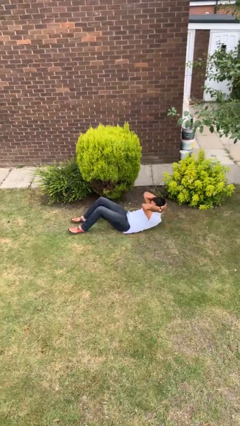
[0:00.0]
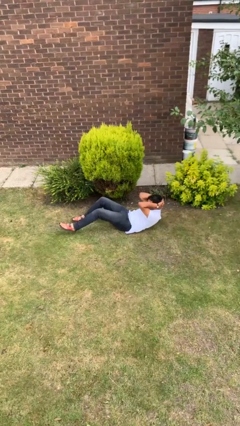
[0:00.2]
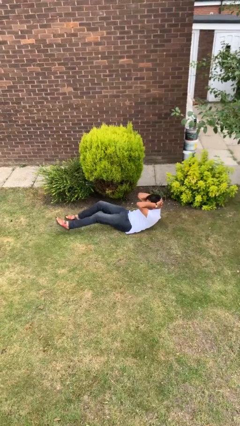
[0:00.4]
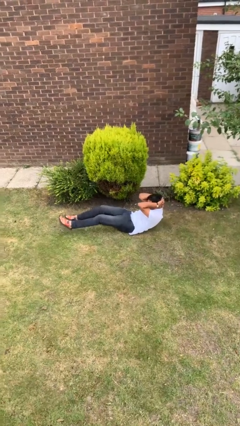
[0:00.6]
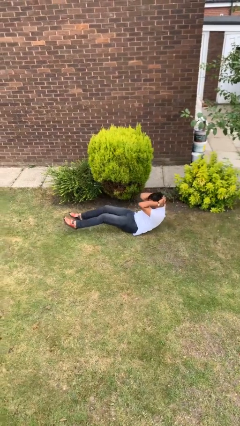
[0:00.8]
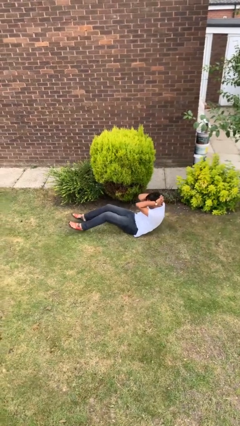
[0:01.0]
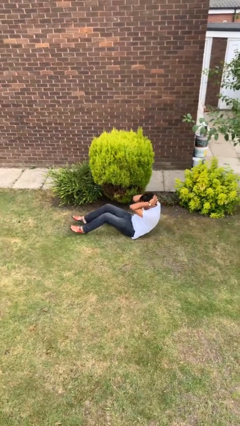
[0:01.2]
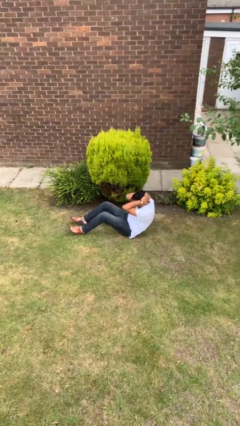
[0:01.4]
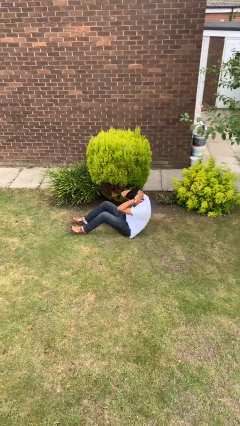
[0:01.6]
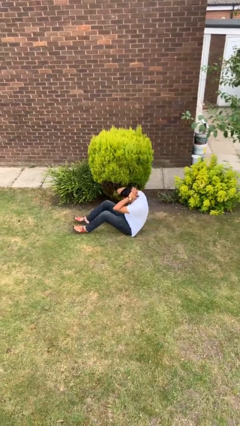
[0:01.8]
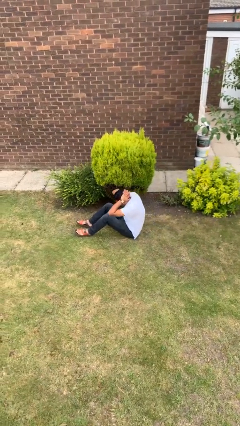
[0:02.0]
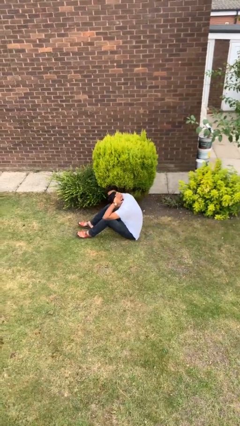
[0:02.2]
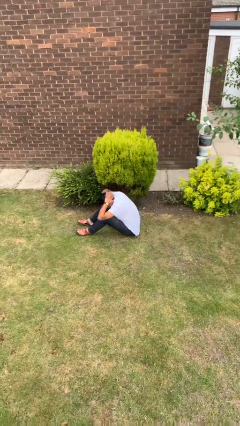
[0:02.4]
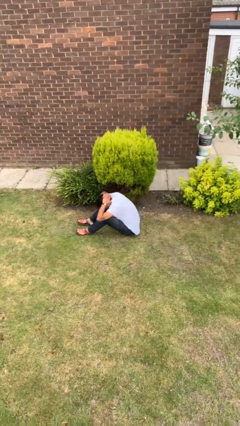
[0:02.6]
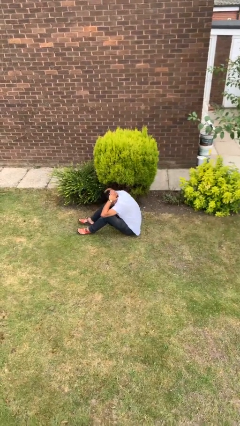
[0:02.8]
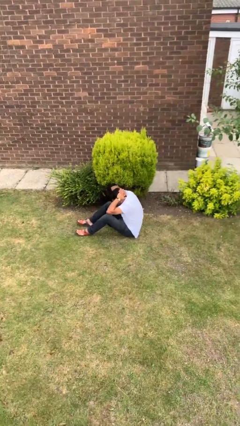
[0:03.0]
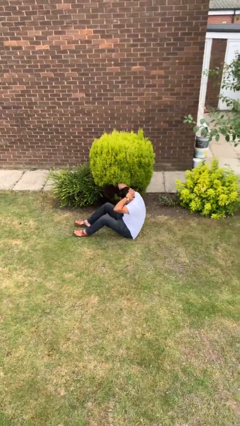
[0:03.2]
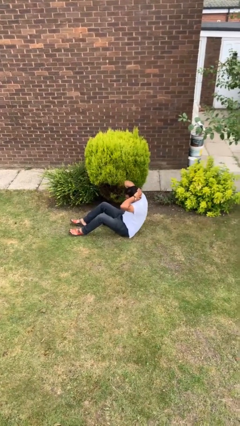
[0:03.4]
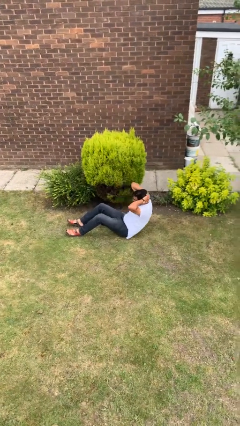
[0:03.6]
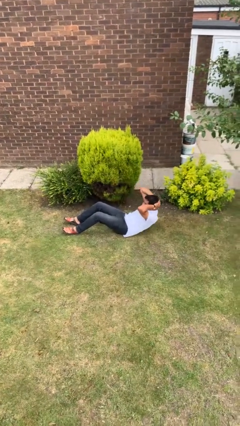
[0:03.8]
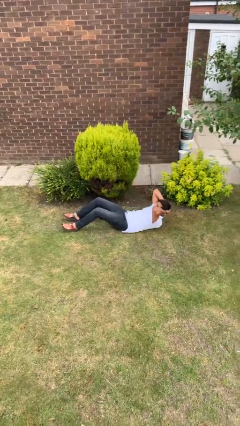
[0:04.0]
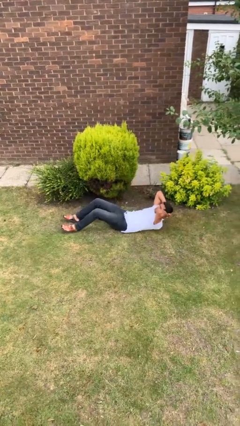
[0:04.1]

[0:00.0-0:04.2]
person exercises with situp

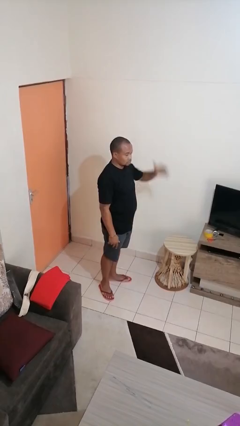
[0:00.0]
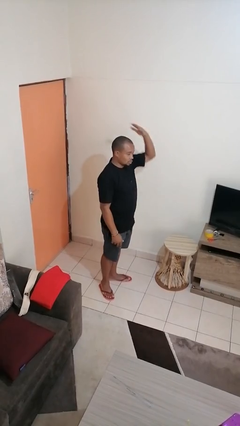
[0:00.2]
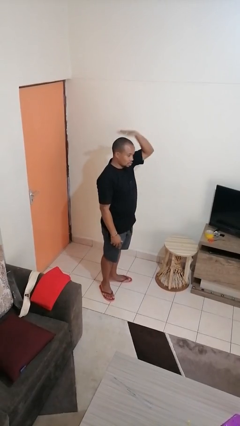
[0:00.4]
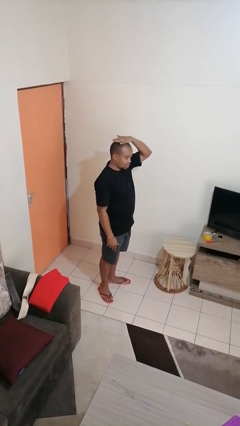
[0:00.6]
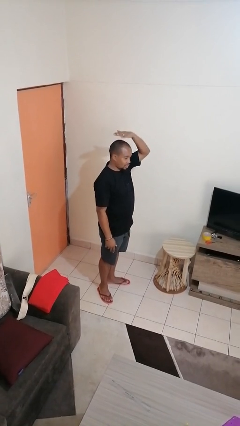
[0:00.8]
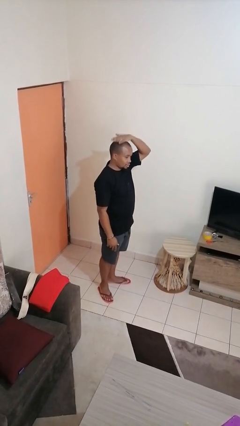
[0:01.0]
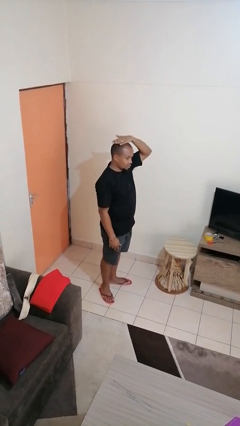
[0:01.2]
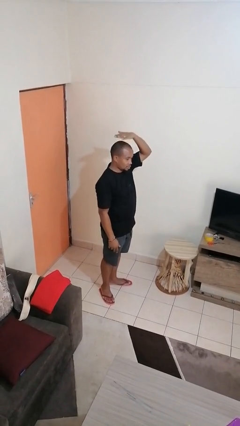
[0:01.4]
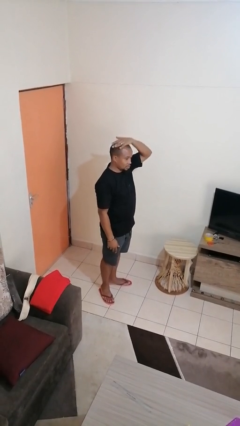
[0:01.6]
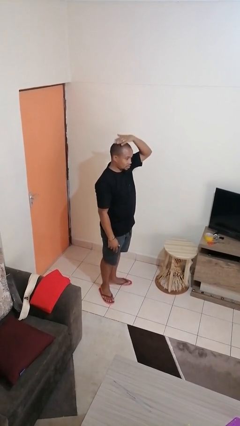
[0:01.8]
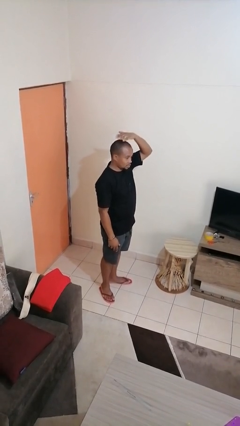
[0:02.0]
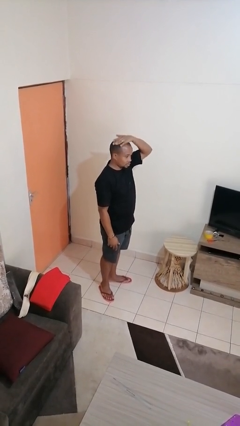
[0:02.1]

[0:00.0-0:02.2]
person pats head

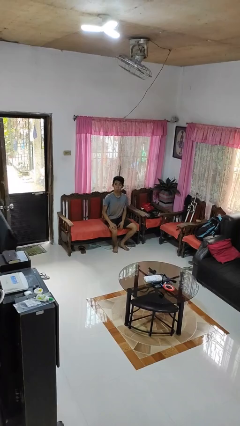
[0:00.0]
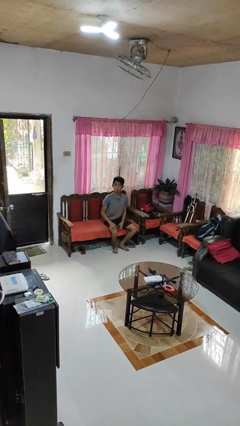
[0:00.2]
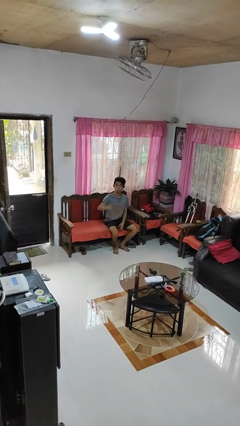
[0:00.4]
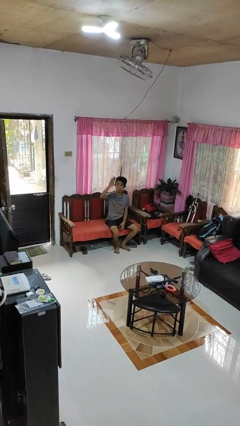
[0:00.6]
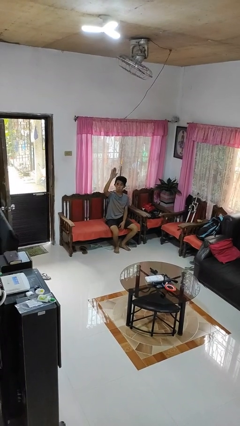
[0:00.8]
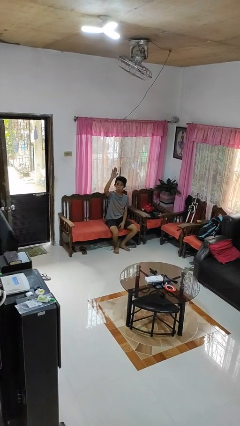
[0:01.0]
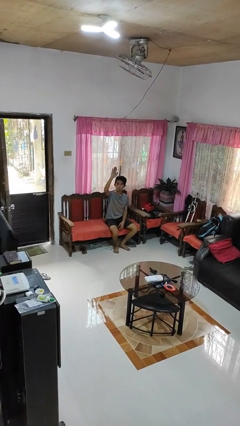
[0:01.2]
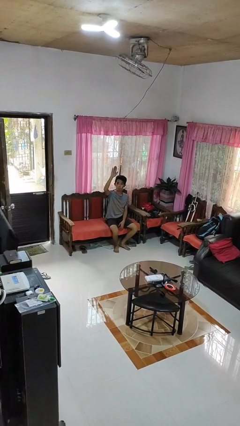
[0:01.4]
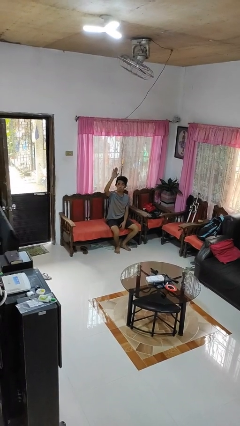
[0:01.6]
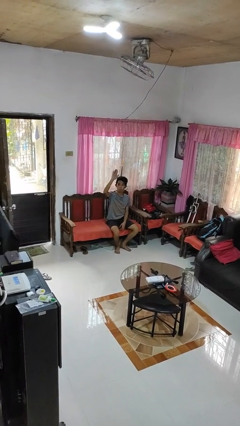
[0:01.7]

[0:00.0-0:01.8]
person gestures raise hand

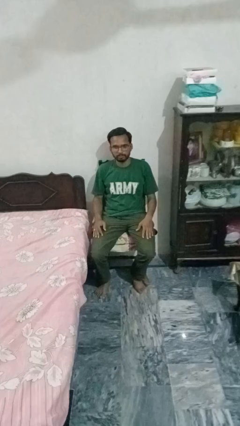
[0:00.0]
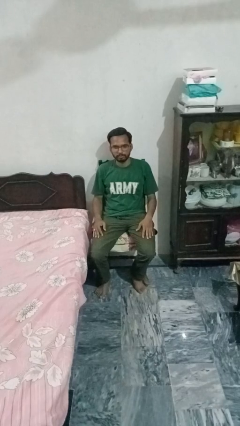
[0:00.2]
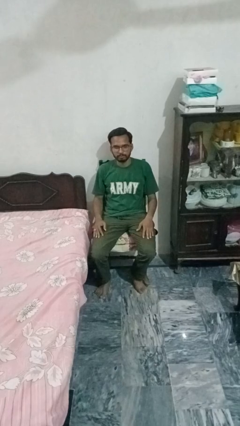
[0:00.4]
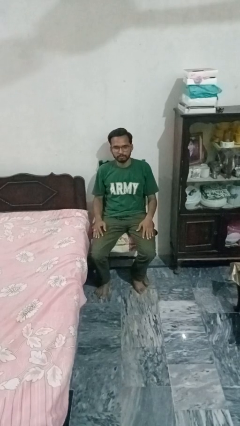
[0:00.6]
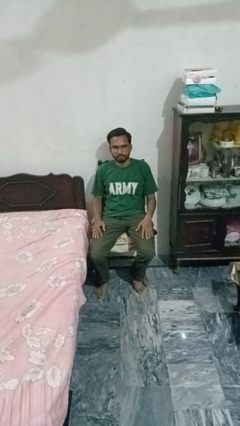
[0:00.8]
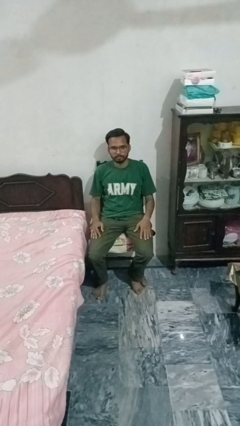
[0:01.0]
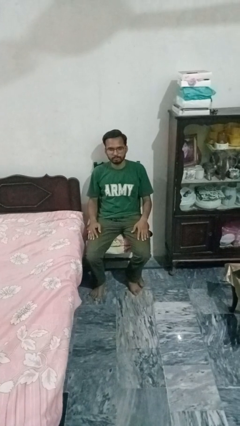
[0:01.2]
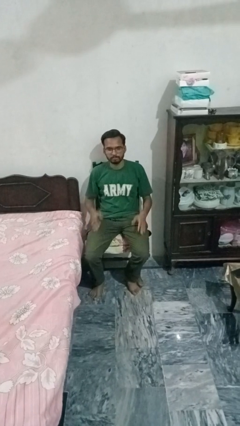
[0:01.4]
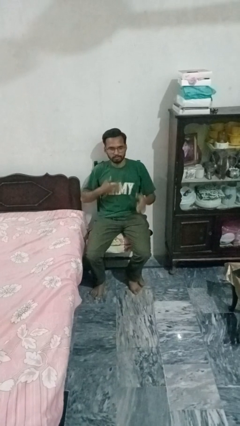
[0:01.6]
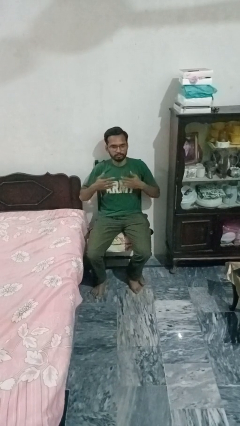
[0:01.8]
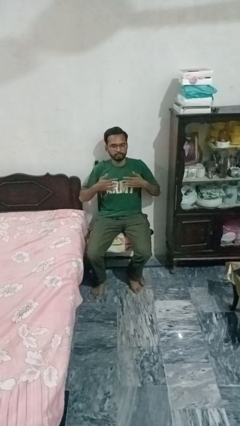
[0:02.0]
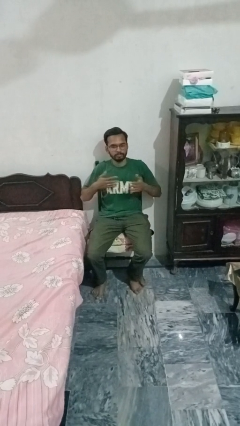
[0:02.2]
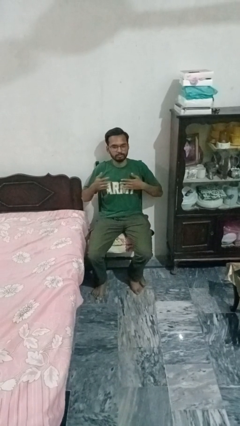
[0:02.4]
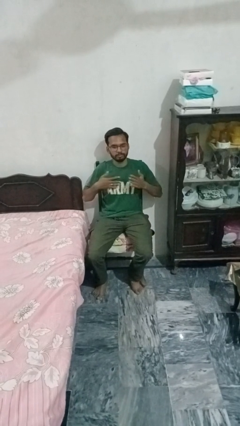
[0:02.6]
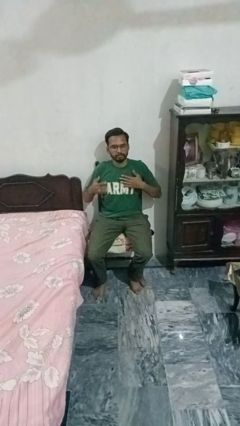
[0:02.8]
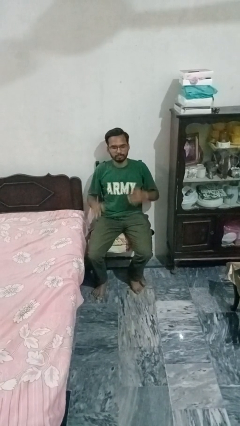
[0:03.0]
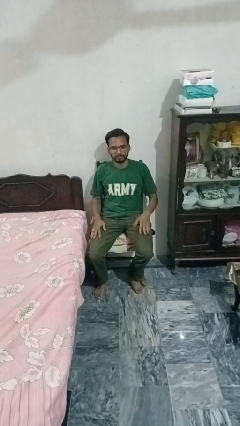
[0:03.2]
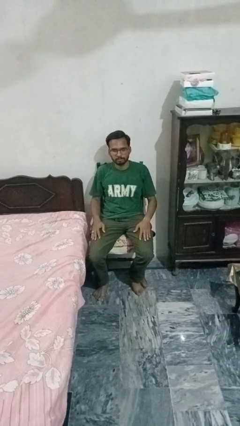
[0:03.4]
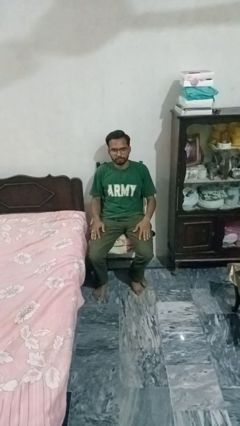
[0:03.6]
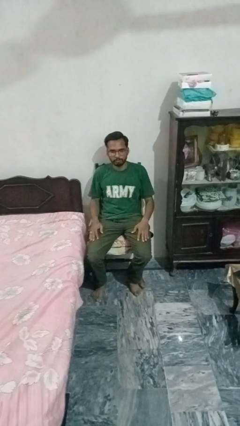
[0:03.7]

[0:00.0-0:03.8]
person drums on chest

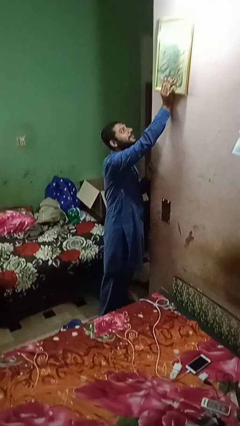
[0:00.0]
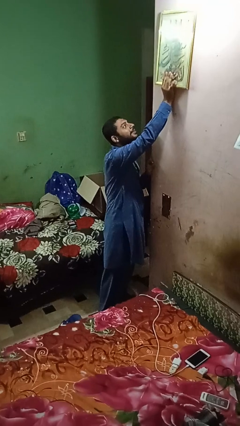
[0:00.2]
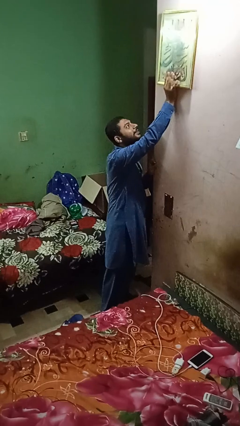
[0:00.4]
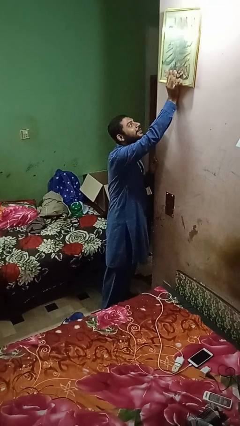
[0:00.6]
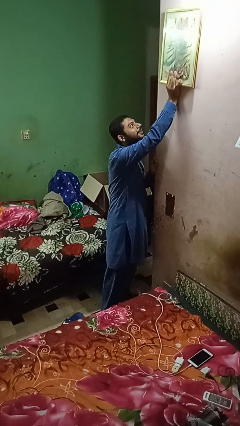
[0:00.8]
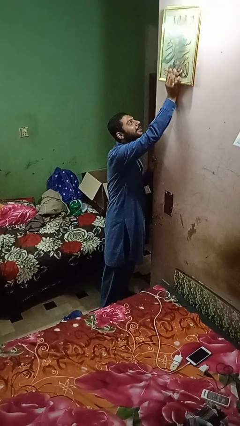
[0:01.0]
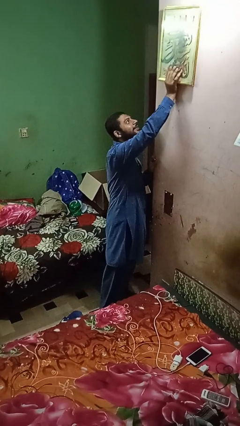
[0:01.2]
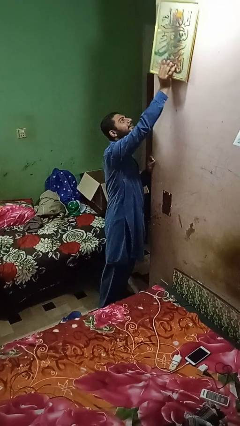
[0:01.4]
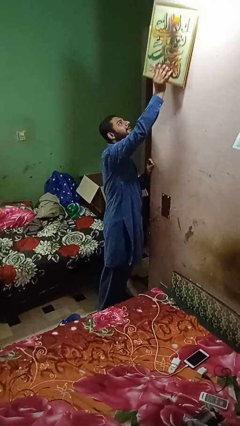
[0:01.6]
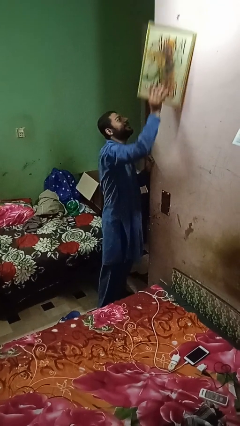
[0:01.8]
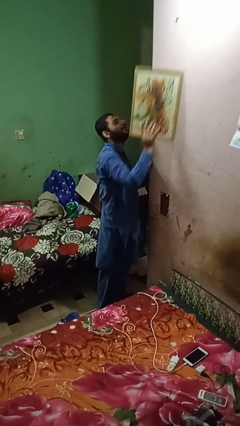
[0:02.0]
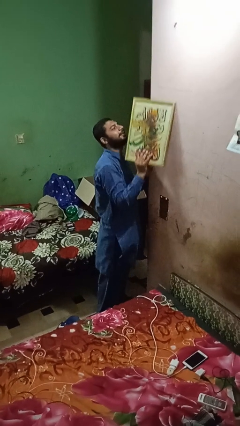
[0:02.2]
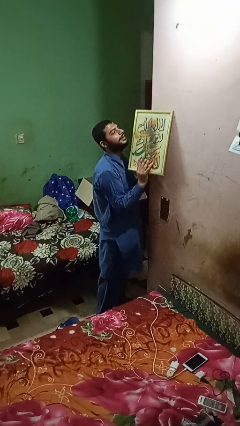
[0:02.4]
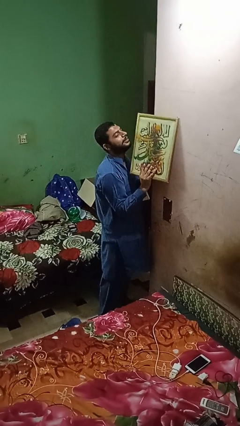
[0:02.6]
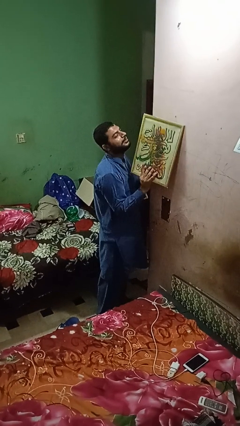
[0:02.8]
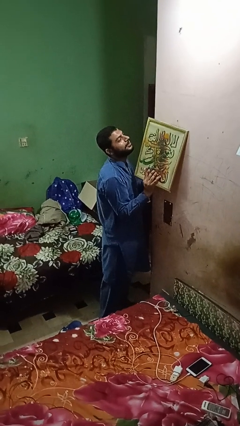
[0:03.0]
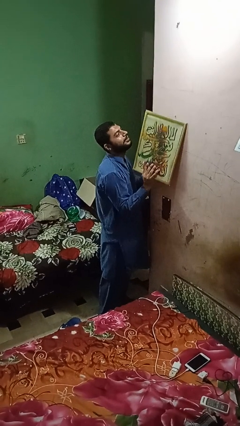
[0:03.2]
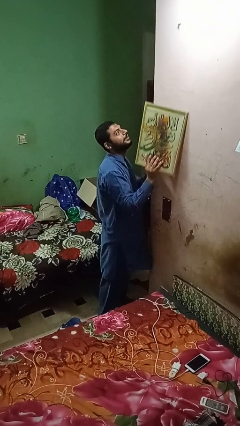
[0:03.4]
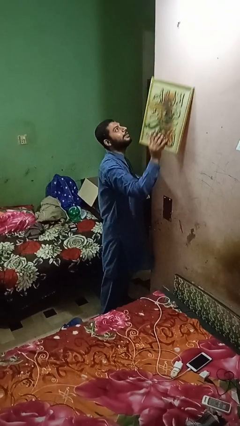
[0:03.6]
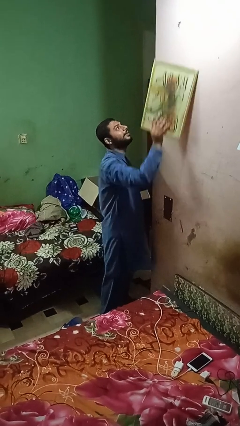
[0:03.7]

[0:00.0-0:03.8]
person takes down picture frame

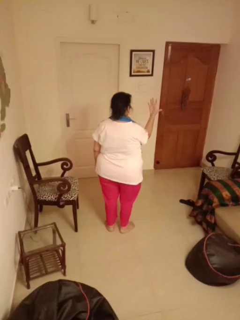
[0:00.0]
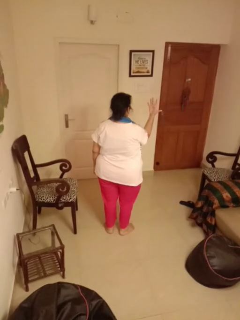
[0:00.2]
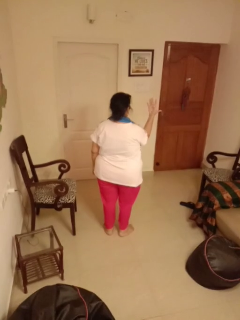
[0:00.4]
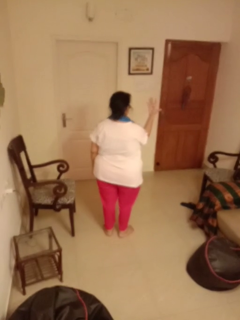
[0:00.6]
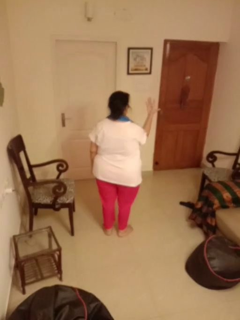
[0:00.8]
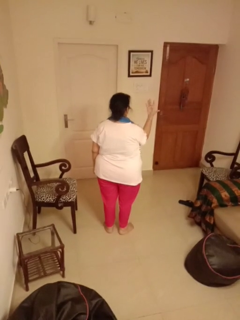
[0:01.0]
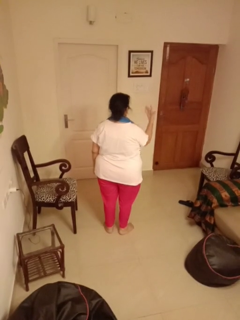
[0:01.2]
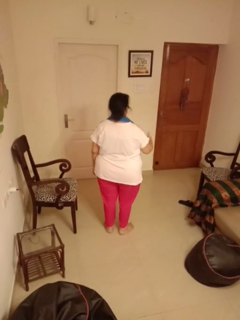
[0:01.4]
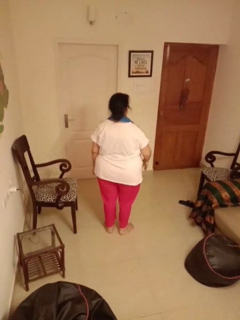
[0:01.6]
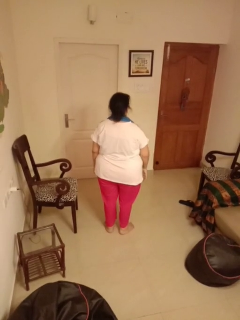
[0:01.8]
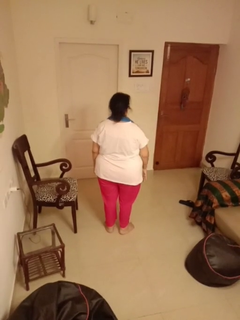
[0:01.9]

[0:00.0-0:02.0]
person gestures number five
